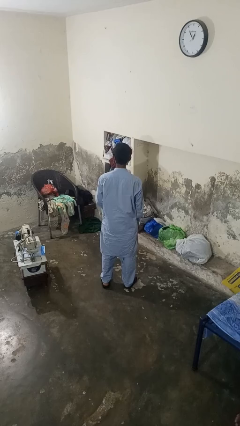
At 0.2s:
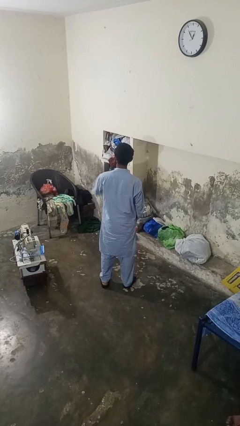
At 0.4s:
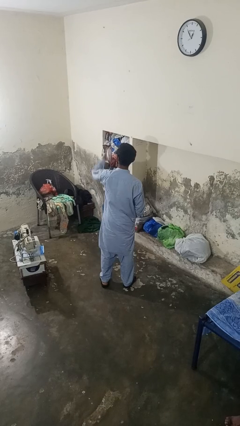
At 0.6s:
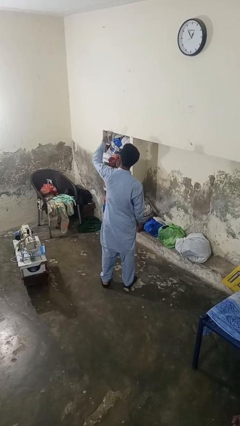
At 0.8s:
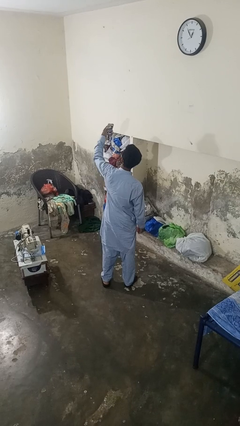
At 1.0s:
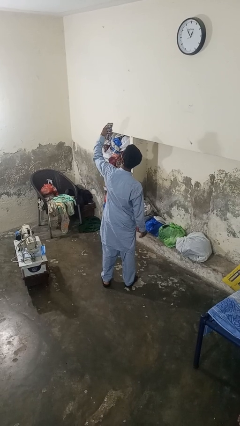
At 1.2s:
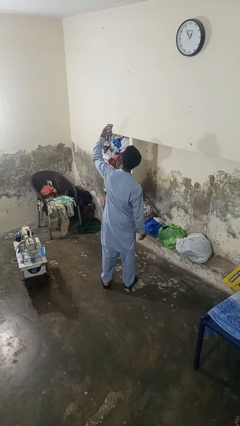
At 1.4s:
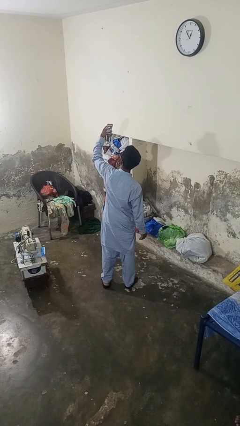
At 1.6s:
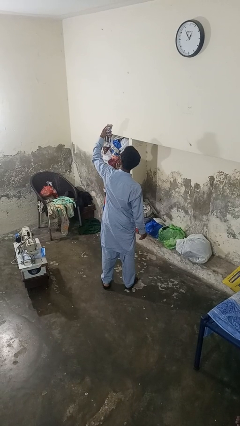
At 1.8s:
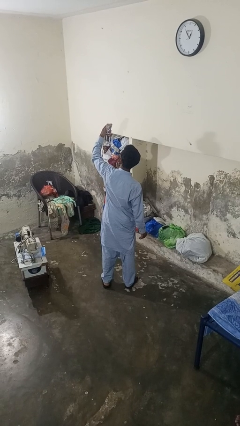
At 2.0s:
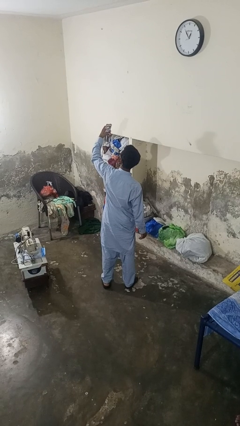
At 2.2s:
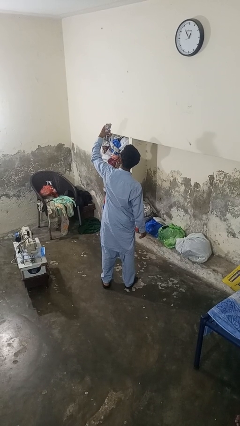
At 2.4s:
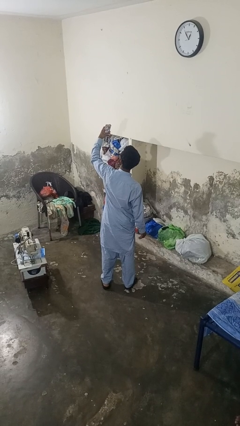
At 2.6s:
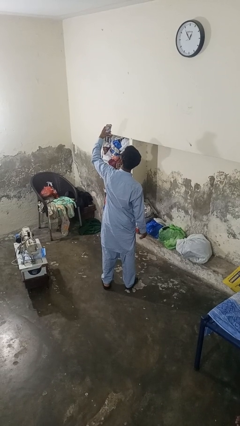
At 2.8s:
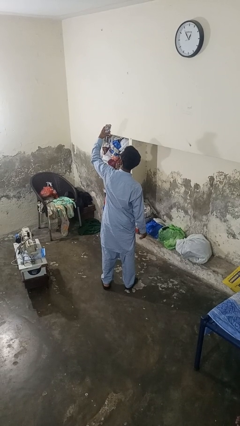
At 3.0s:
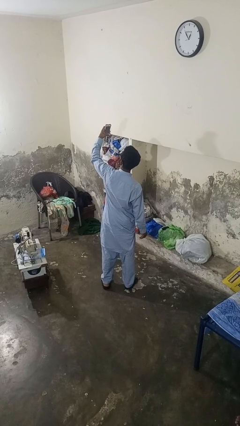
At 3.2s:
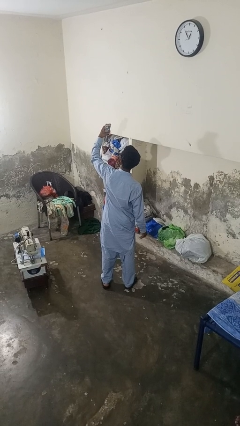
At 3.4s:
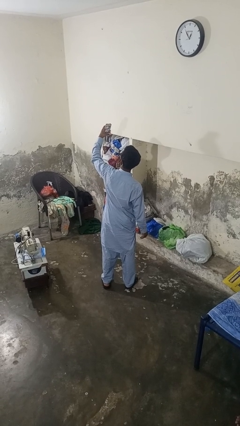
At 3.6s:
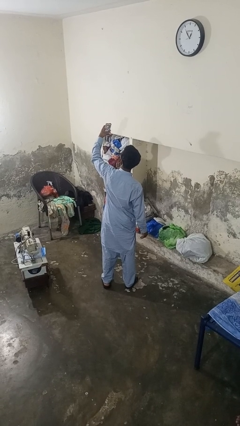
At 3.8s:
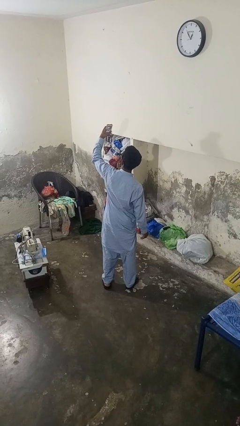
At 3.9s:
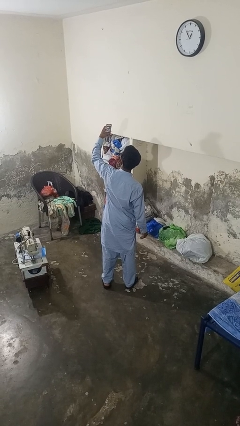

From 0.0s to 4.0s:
person takes selfie

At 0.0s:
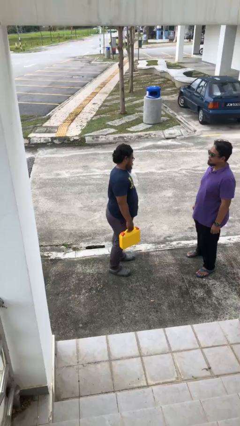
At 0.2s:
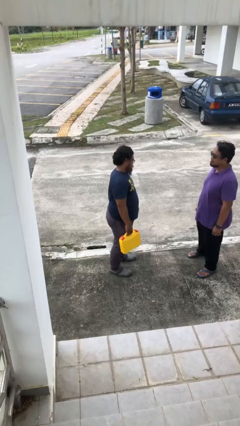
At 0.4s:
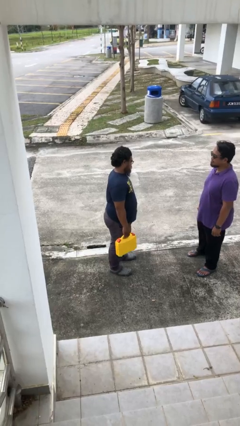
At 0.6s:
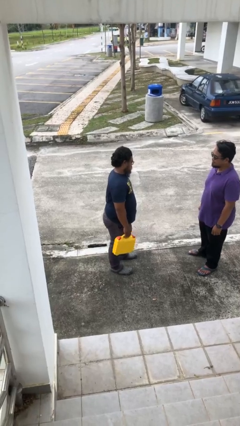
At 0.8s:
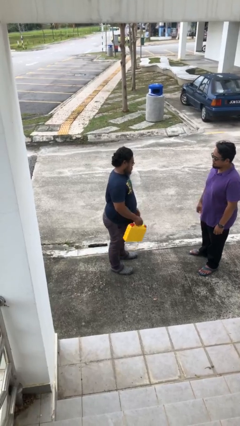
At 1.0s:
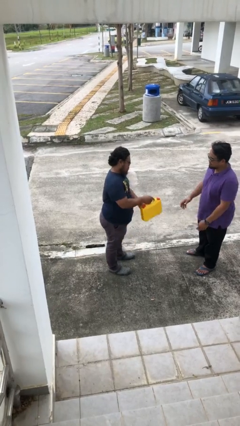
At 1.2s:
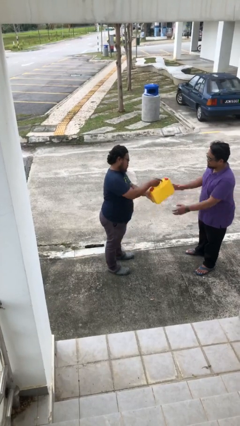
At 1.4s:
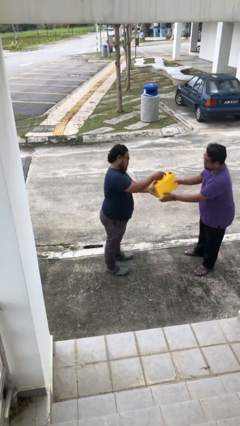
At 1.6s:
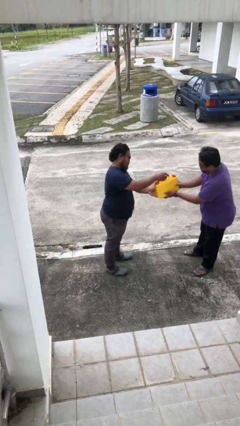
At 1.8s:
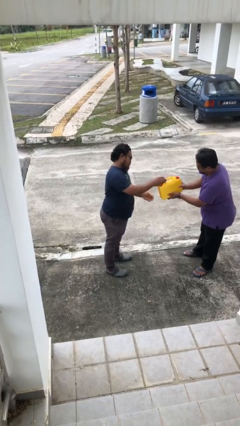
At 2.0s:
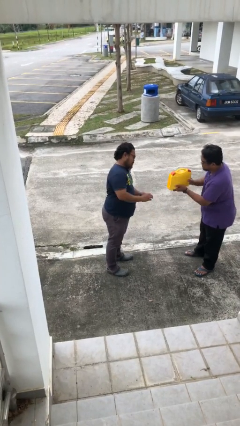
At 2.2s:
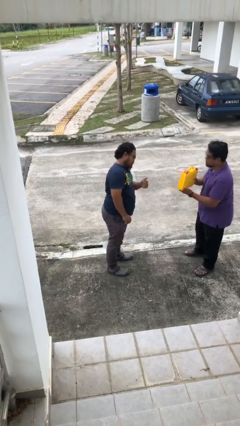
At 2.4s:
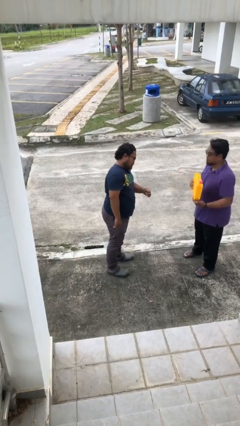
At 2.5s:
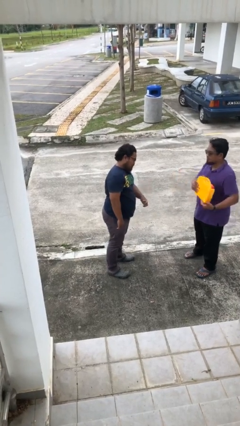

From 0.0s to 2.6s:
person transfers object to person

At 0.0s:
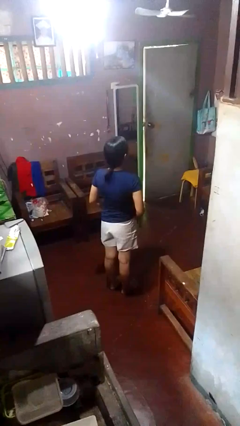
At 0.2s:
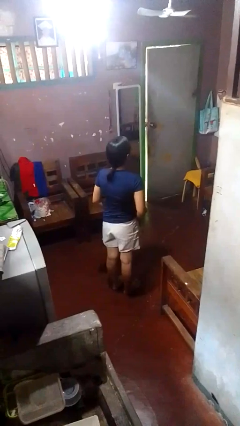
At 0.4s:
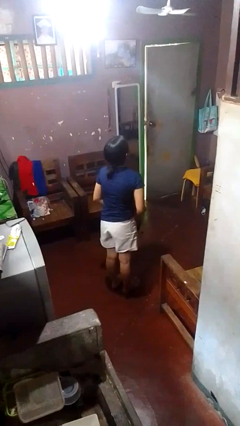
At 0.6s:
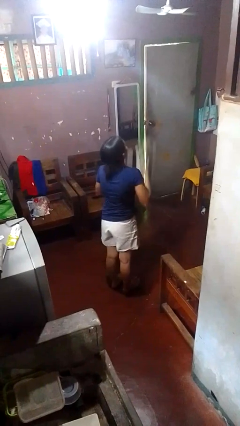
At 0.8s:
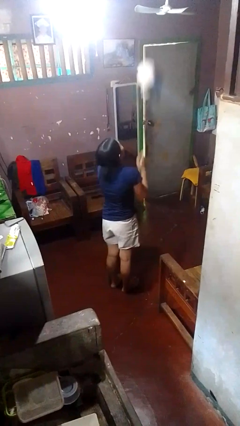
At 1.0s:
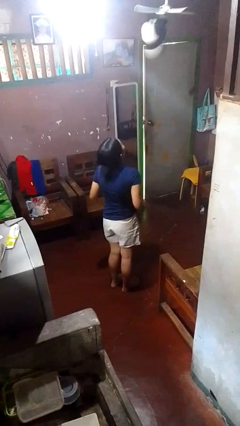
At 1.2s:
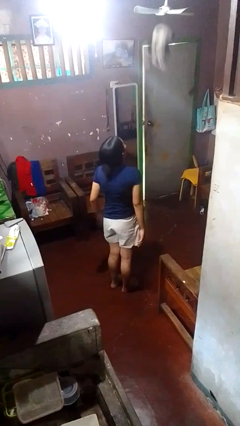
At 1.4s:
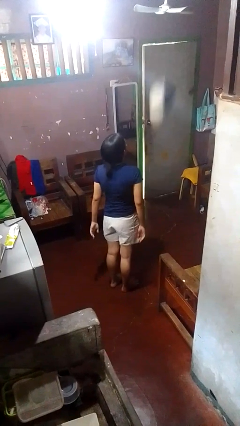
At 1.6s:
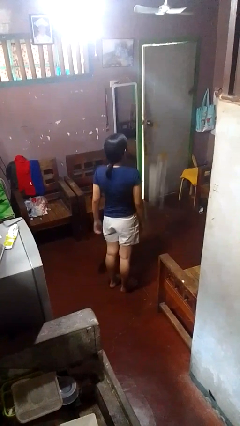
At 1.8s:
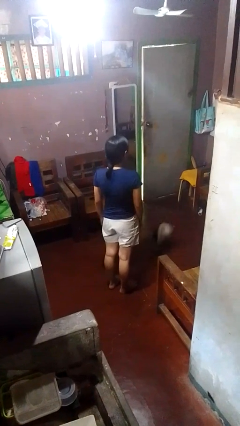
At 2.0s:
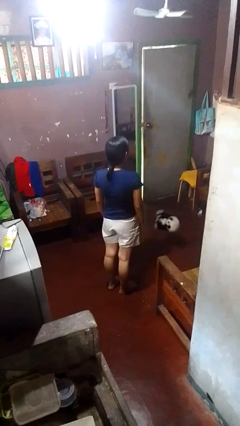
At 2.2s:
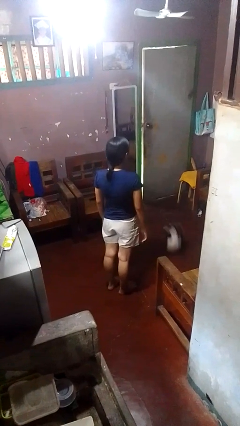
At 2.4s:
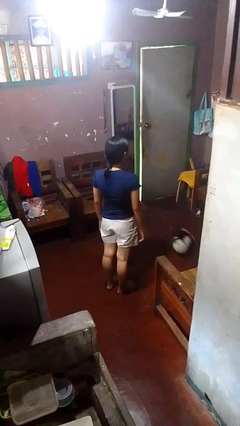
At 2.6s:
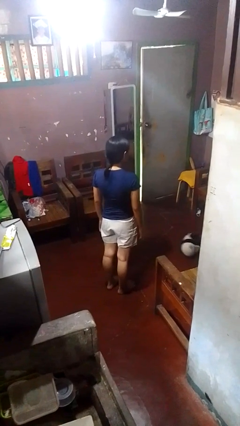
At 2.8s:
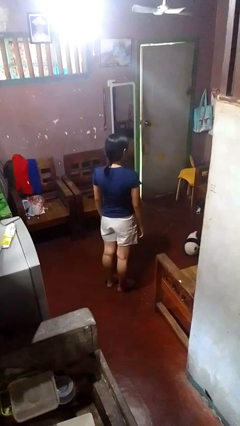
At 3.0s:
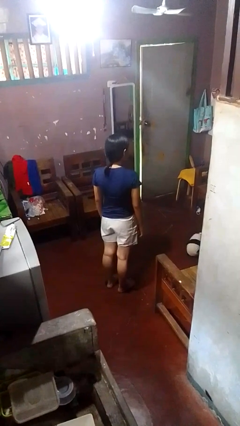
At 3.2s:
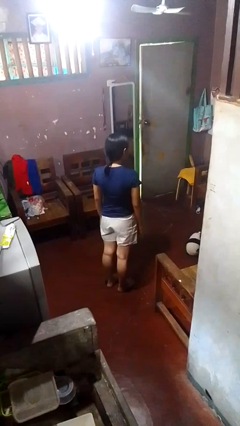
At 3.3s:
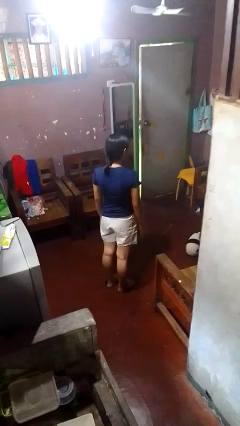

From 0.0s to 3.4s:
person throws object into air

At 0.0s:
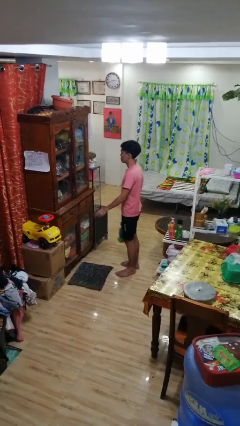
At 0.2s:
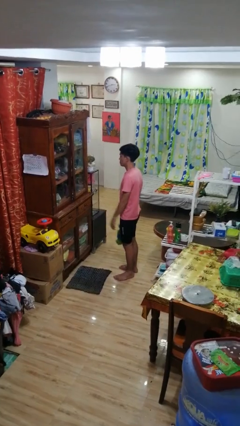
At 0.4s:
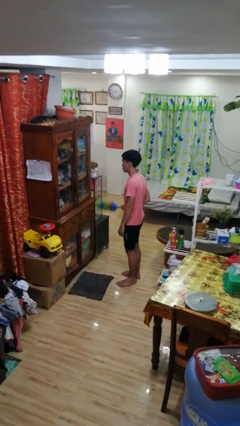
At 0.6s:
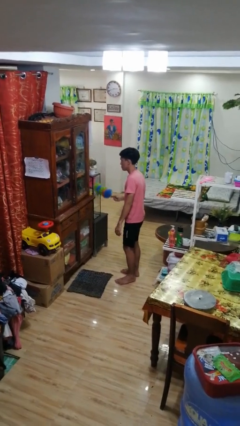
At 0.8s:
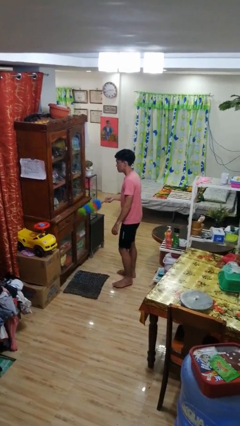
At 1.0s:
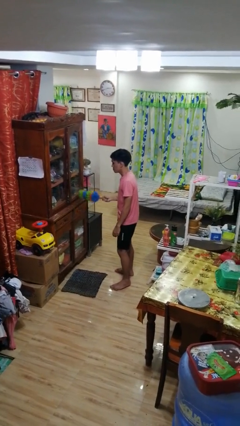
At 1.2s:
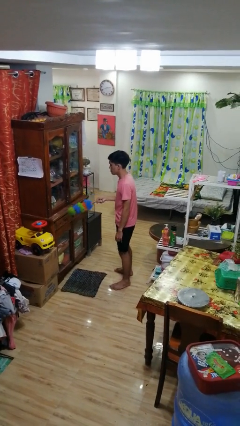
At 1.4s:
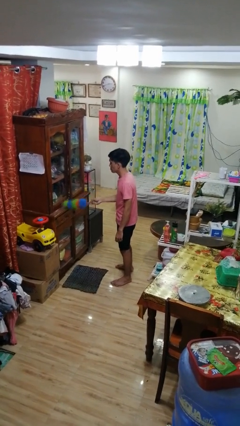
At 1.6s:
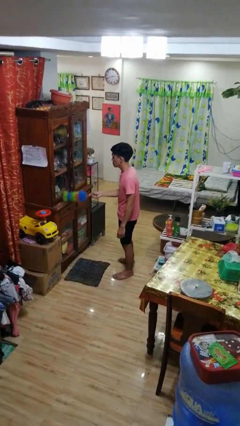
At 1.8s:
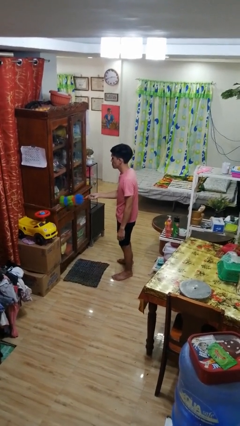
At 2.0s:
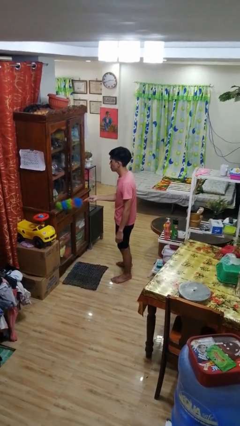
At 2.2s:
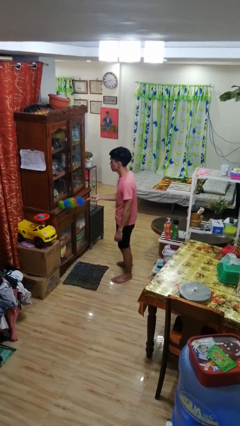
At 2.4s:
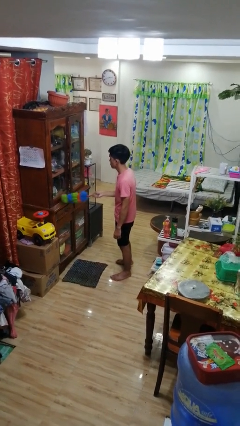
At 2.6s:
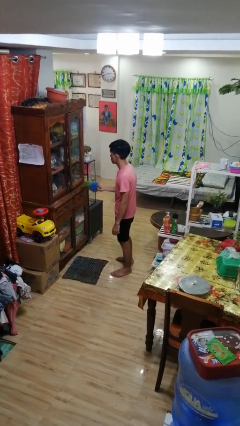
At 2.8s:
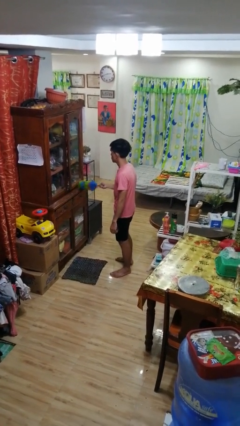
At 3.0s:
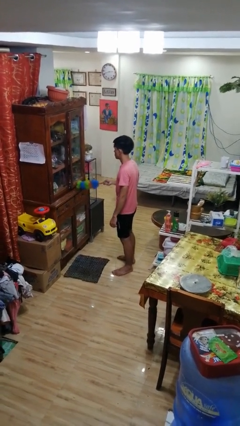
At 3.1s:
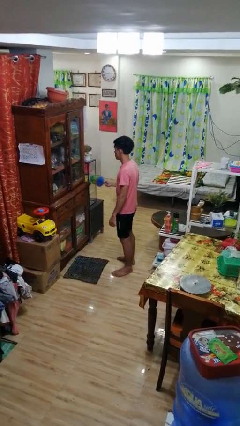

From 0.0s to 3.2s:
person dusts furniture

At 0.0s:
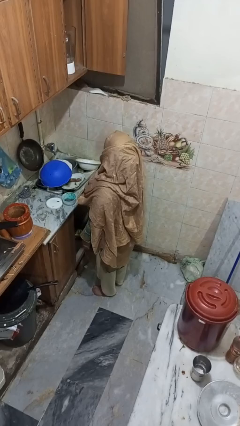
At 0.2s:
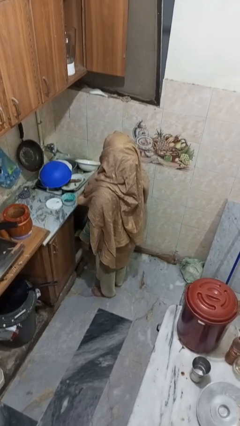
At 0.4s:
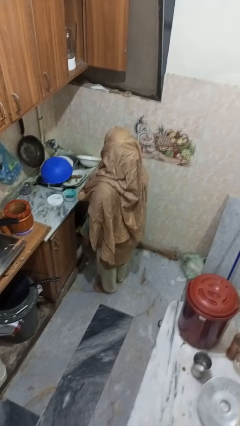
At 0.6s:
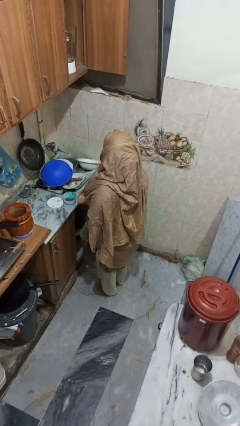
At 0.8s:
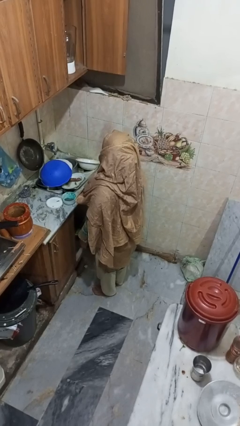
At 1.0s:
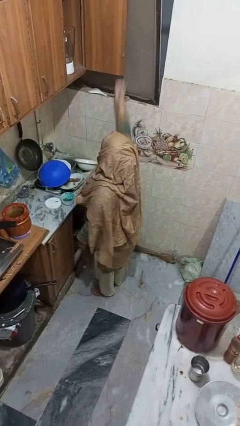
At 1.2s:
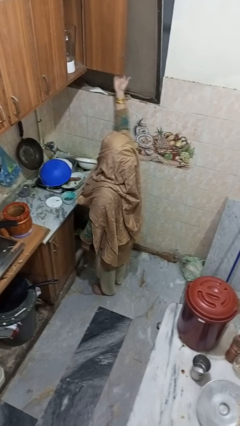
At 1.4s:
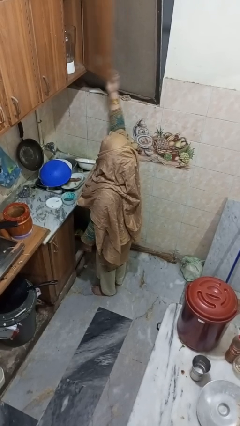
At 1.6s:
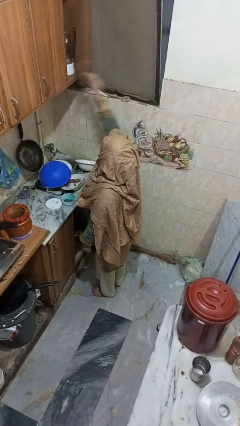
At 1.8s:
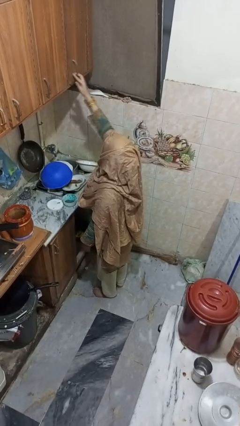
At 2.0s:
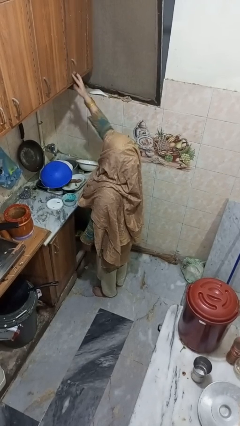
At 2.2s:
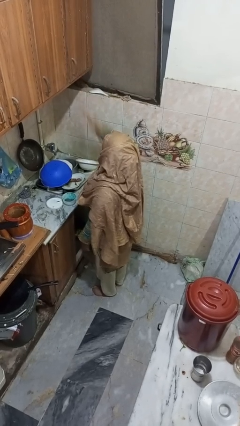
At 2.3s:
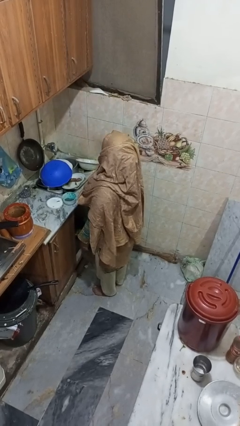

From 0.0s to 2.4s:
person closes cabinet

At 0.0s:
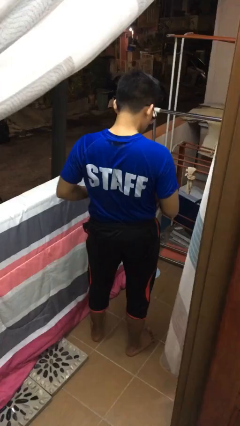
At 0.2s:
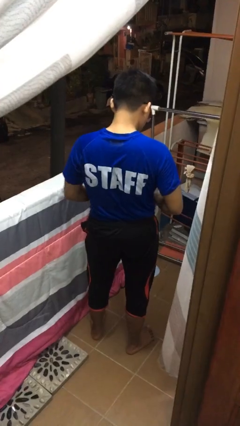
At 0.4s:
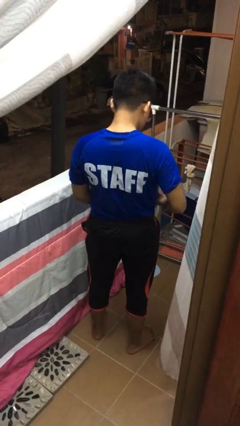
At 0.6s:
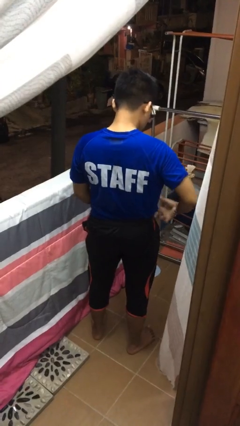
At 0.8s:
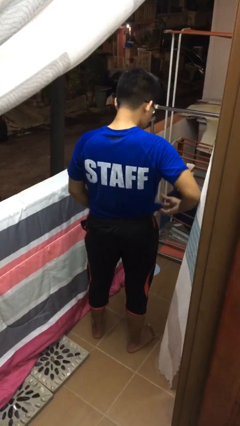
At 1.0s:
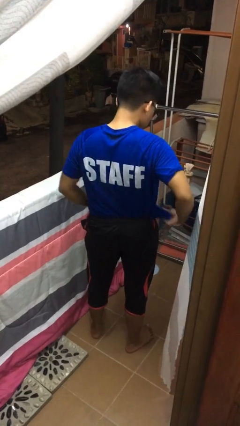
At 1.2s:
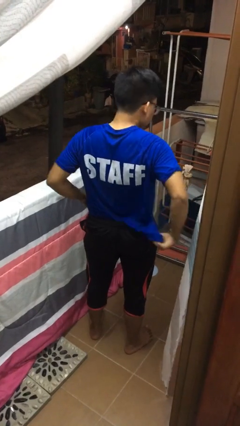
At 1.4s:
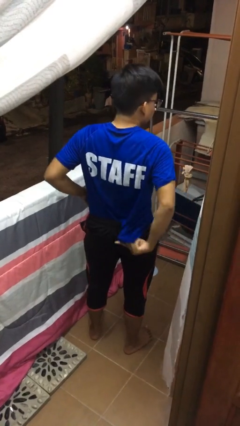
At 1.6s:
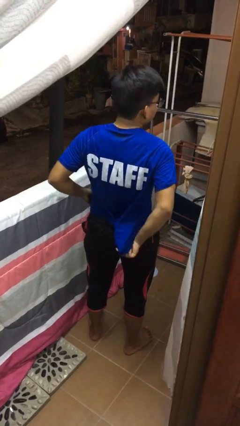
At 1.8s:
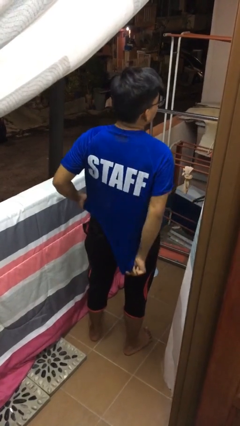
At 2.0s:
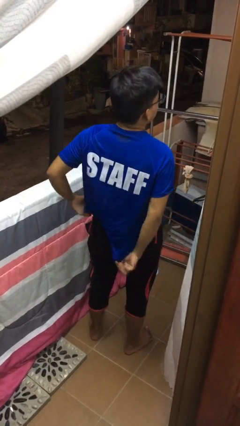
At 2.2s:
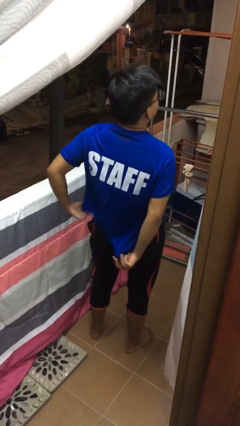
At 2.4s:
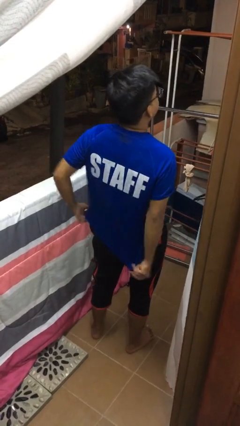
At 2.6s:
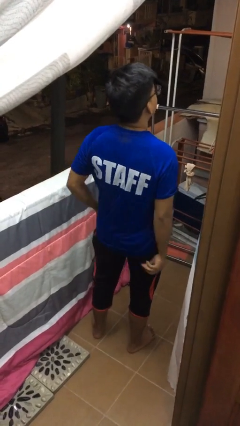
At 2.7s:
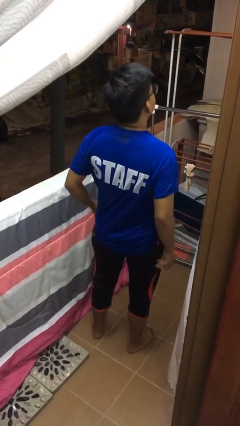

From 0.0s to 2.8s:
person untucks shirt
